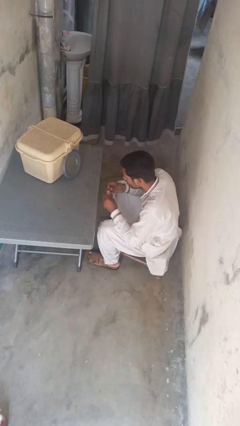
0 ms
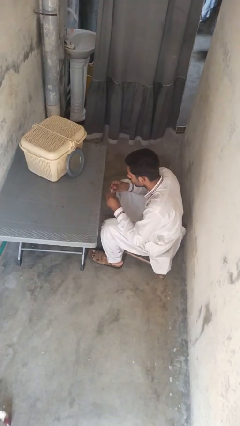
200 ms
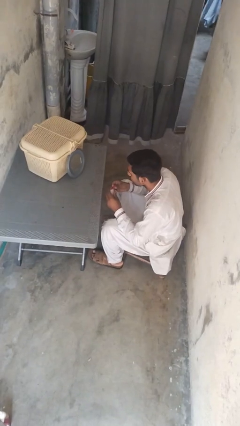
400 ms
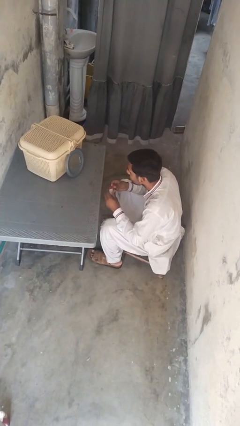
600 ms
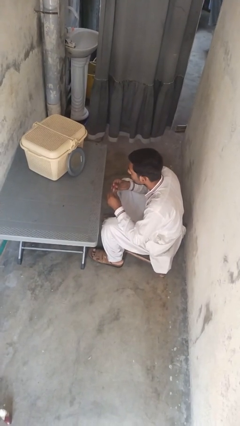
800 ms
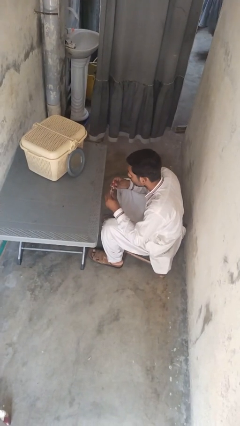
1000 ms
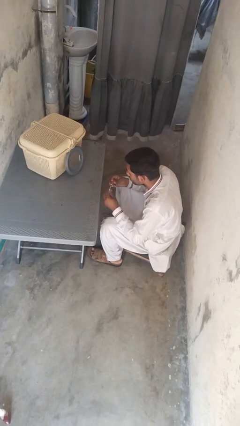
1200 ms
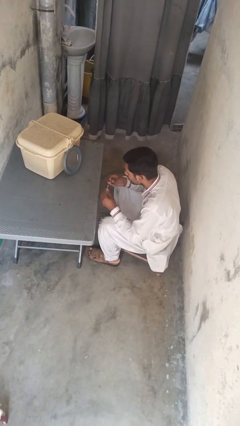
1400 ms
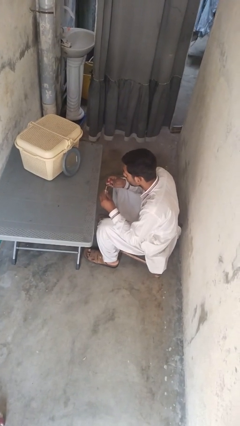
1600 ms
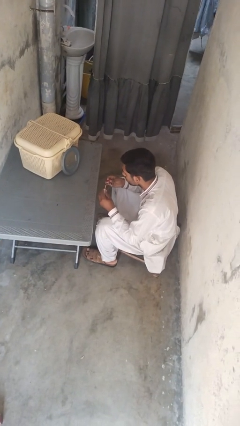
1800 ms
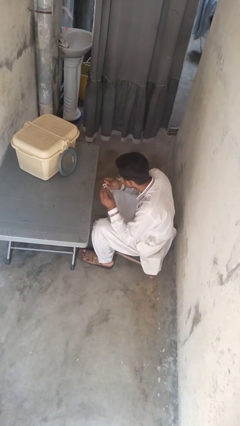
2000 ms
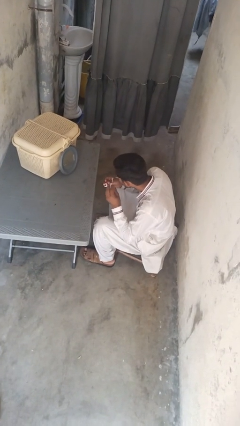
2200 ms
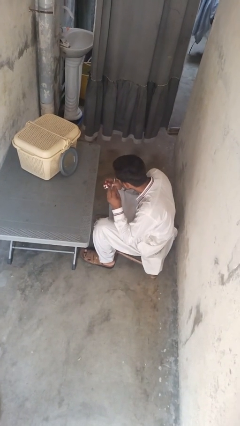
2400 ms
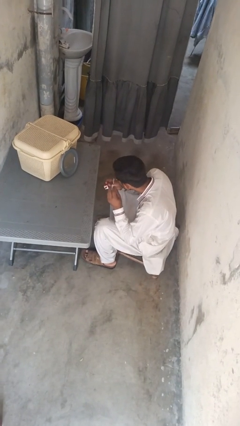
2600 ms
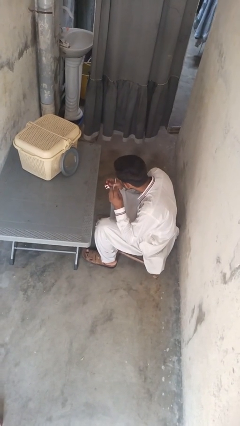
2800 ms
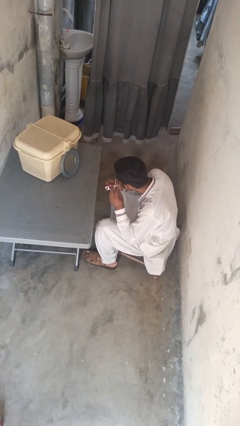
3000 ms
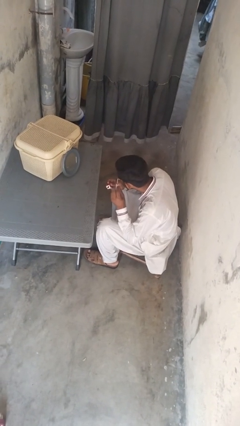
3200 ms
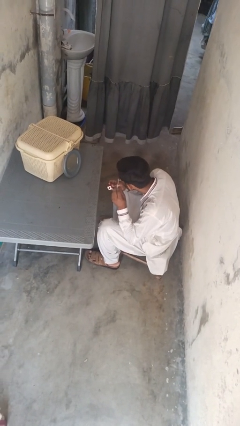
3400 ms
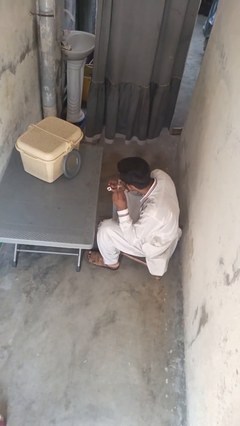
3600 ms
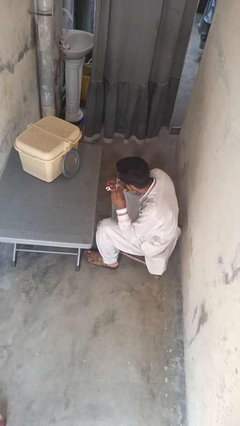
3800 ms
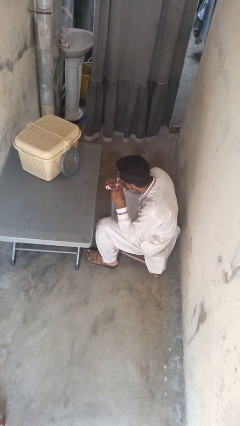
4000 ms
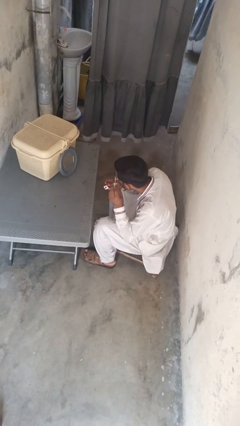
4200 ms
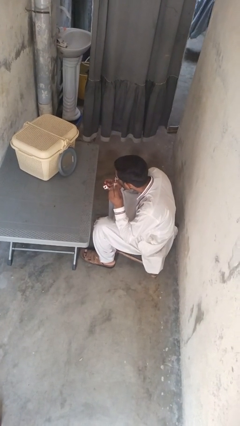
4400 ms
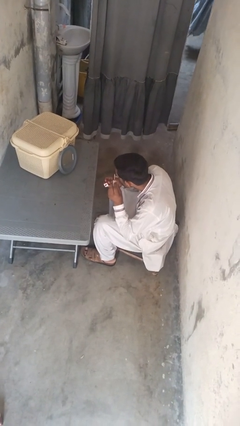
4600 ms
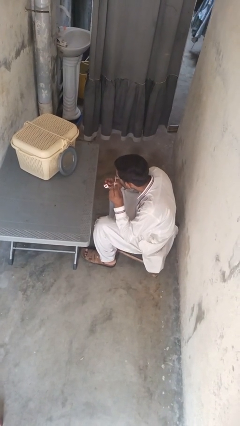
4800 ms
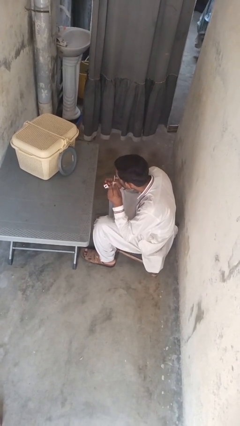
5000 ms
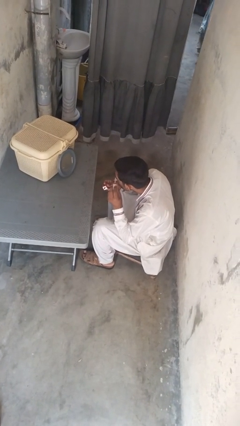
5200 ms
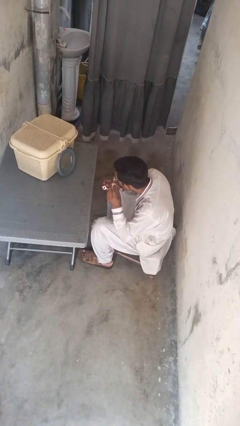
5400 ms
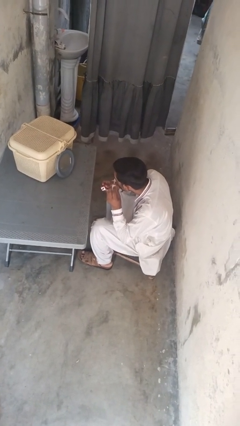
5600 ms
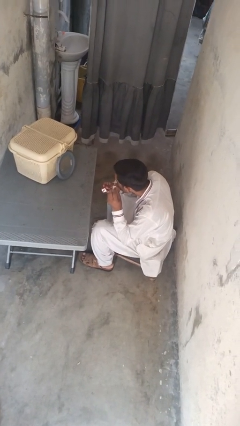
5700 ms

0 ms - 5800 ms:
person applies eye makeup

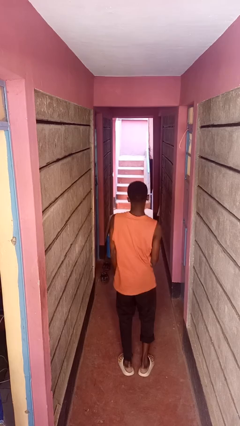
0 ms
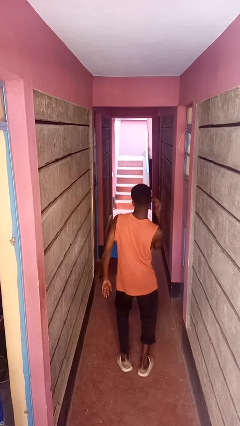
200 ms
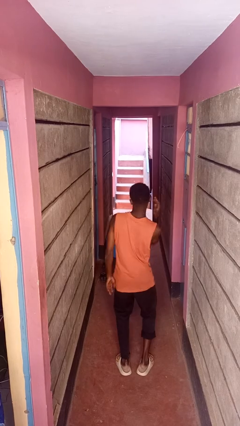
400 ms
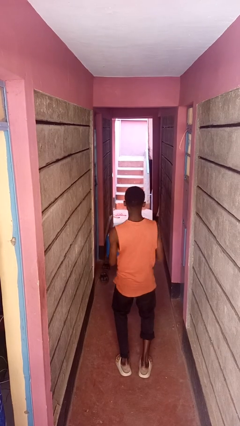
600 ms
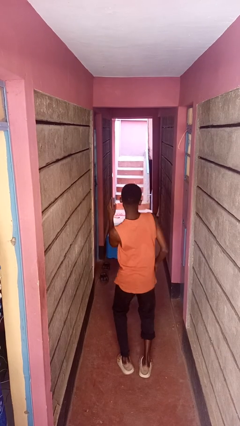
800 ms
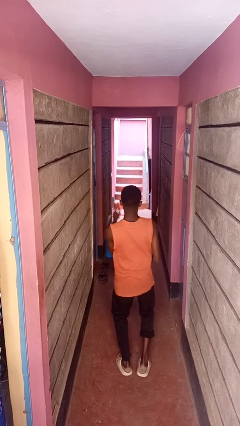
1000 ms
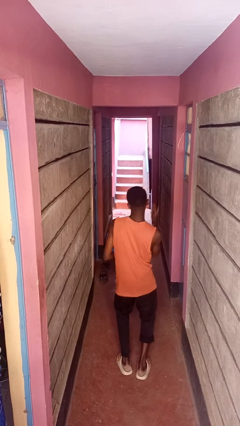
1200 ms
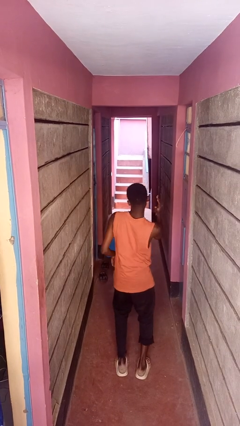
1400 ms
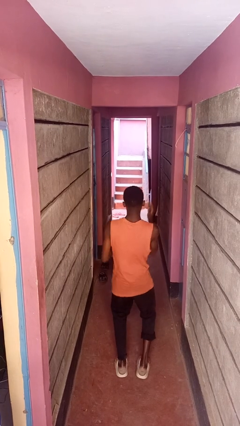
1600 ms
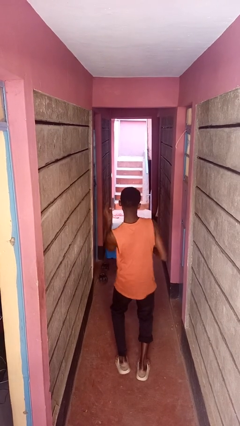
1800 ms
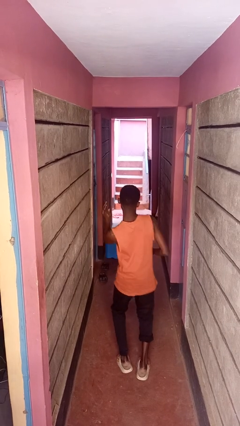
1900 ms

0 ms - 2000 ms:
person dances in place

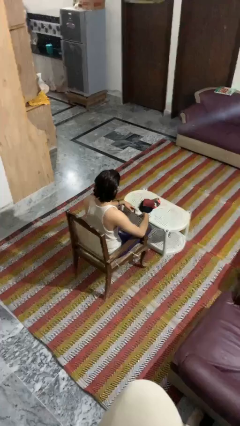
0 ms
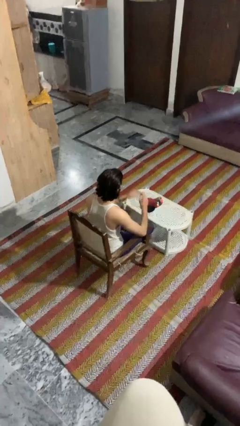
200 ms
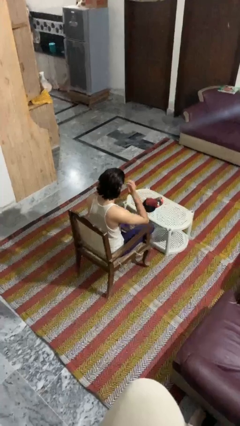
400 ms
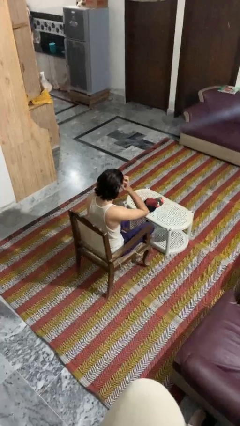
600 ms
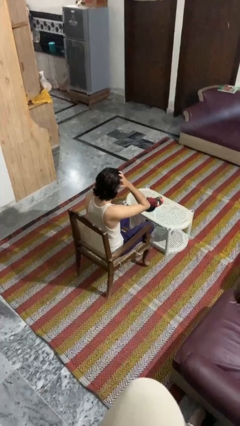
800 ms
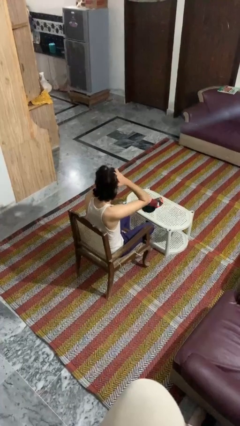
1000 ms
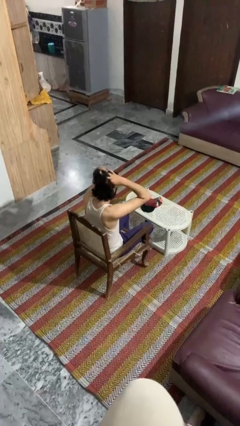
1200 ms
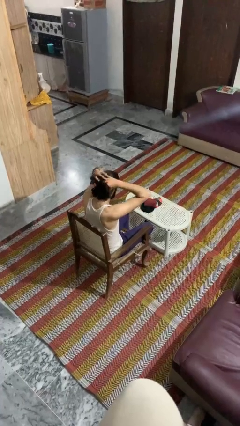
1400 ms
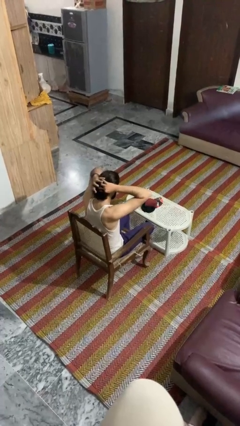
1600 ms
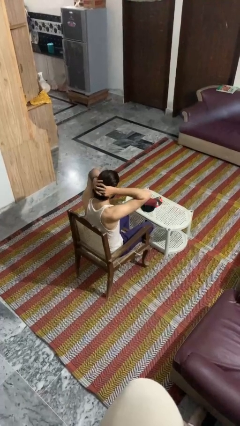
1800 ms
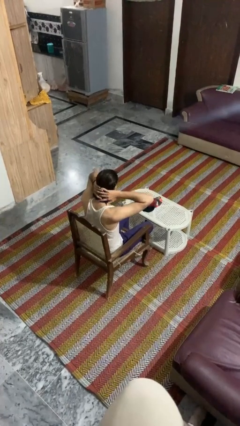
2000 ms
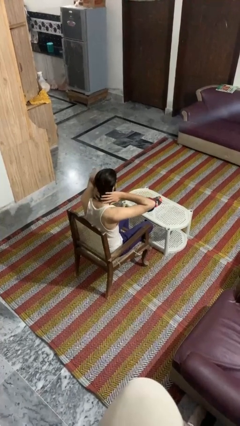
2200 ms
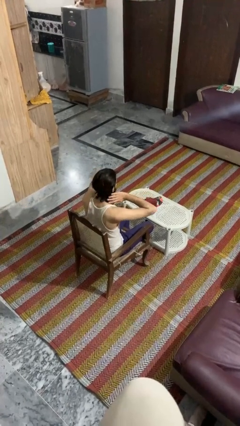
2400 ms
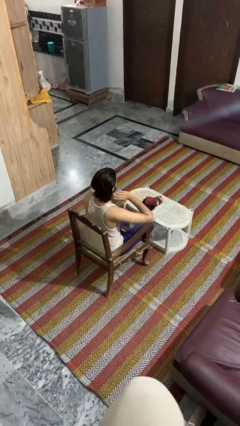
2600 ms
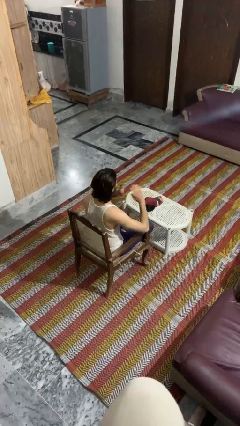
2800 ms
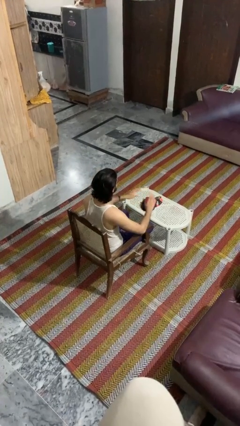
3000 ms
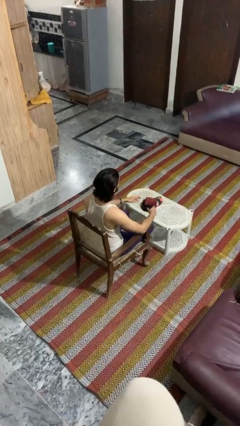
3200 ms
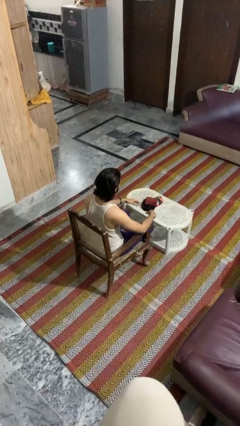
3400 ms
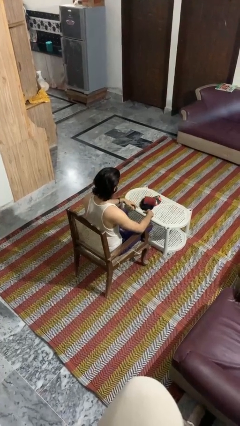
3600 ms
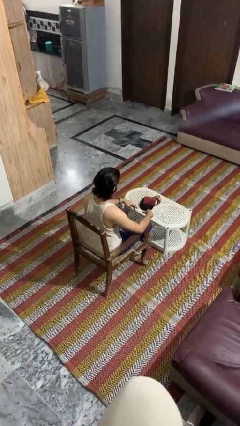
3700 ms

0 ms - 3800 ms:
person strokes hair

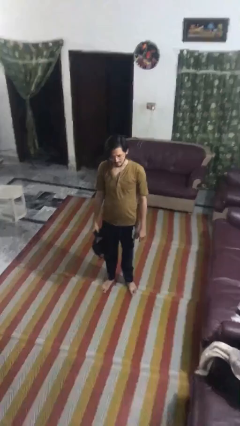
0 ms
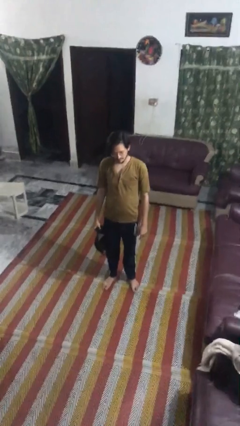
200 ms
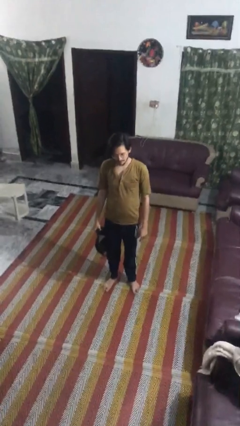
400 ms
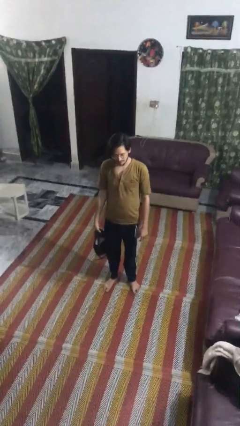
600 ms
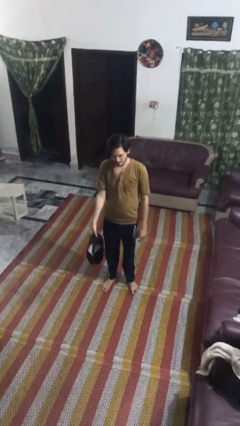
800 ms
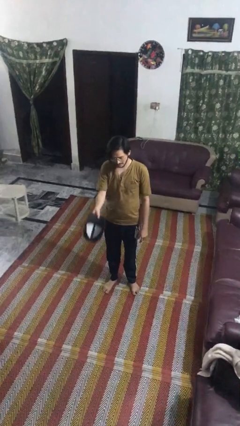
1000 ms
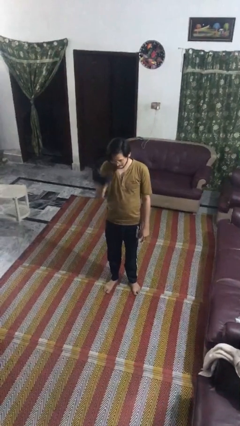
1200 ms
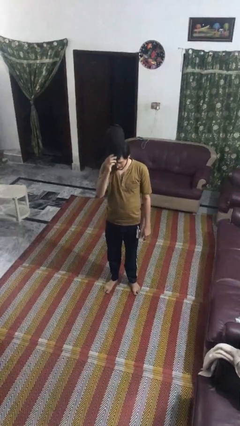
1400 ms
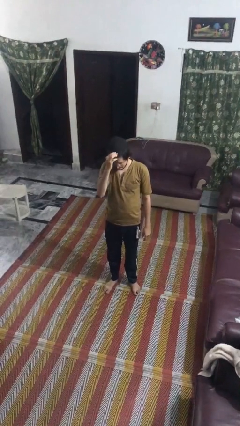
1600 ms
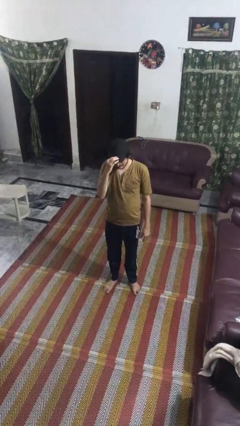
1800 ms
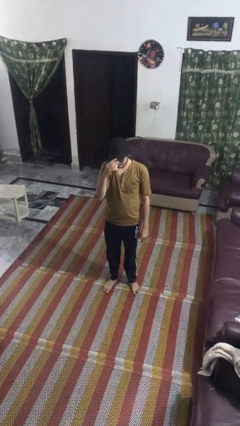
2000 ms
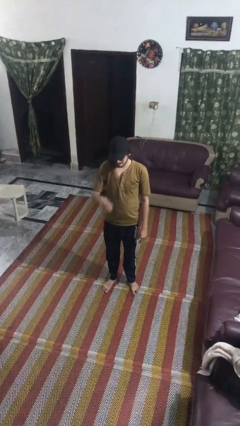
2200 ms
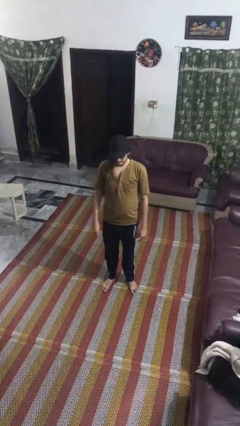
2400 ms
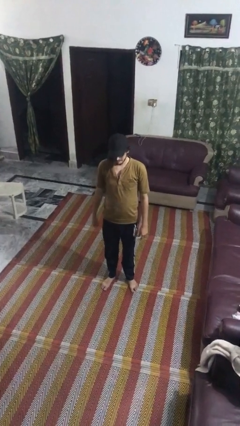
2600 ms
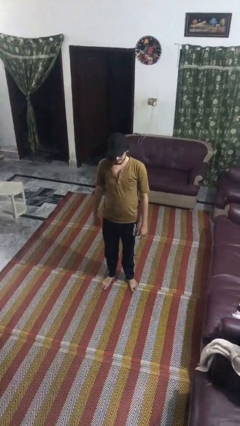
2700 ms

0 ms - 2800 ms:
person puts on hat

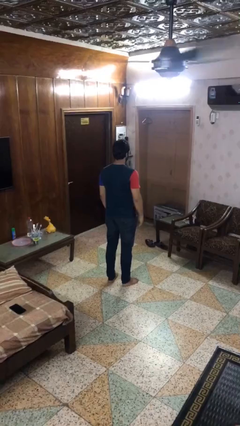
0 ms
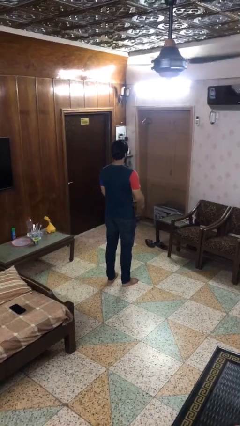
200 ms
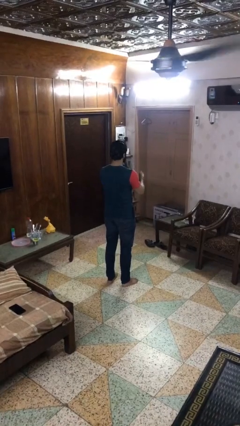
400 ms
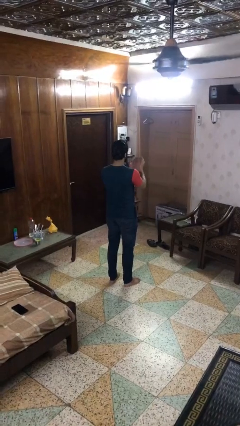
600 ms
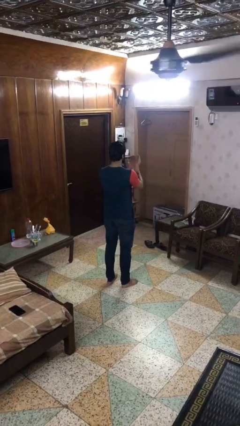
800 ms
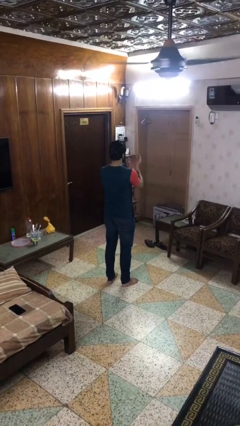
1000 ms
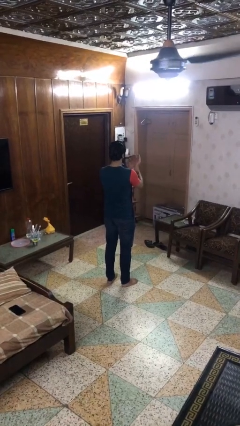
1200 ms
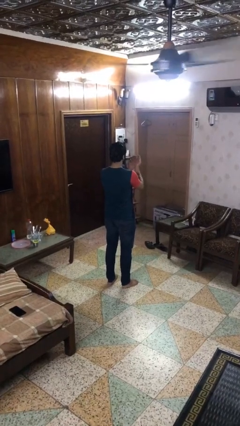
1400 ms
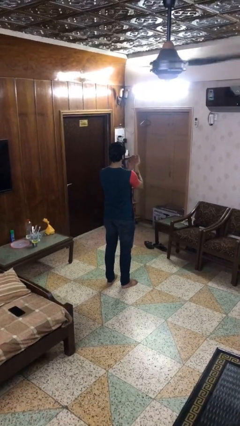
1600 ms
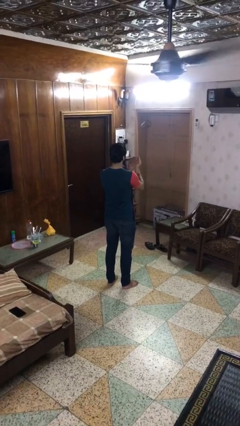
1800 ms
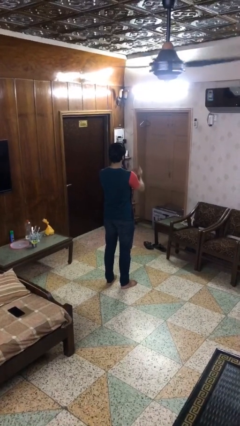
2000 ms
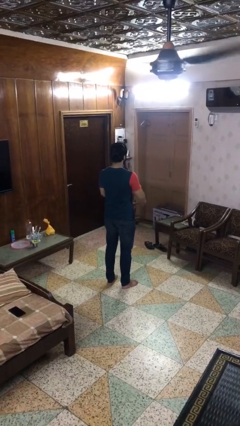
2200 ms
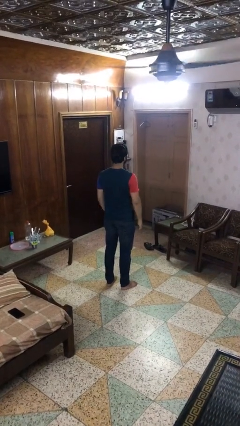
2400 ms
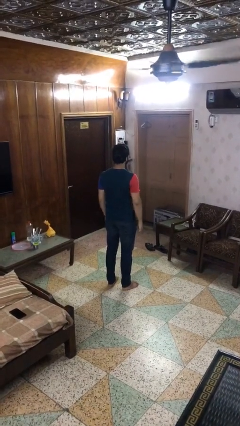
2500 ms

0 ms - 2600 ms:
person prays

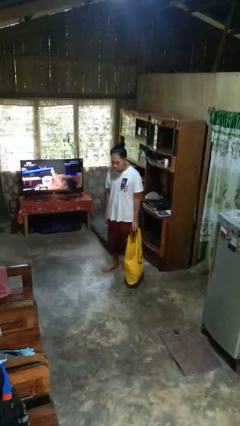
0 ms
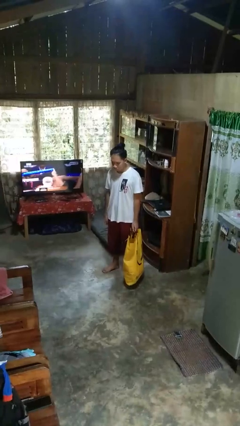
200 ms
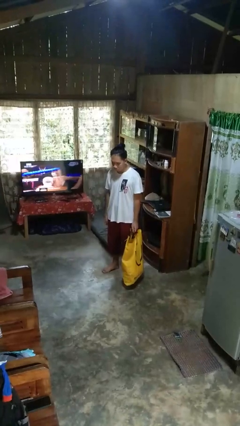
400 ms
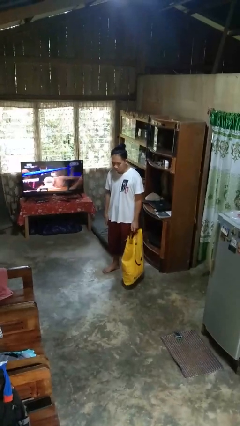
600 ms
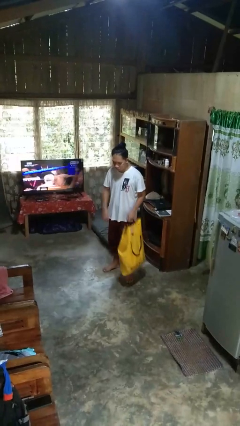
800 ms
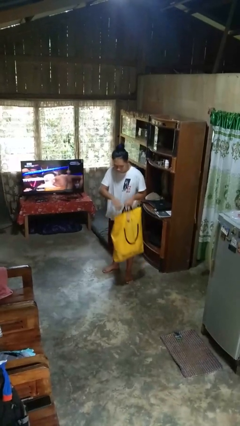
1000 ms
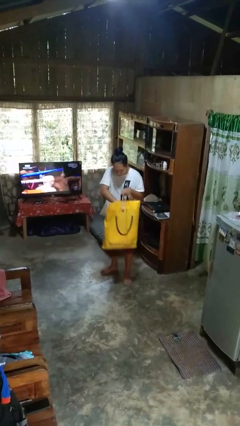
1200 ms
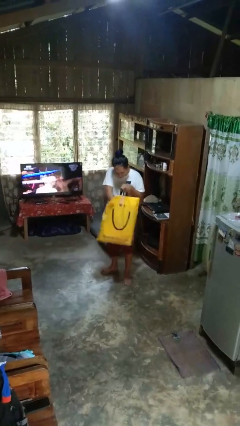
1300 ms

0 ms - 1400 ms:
person searches in bag
